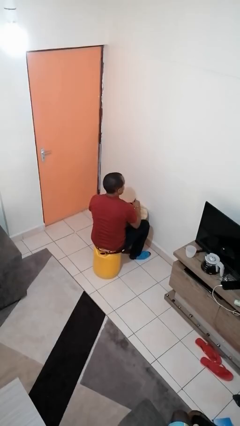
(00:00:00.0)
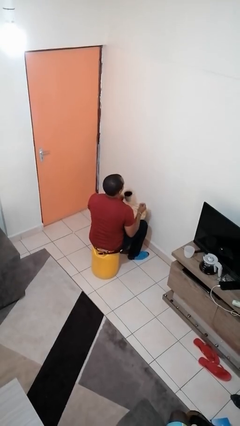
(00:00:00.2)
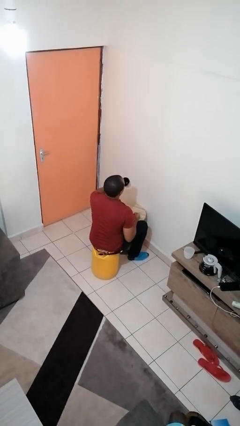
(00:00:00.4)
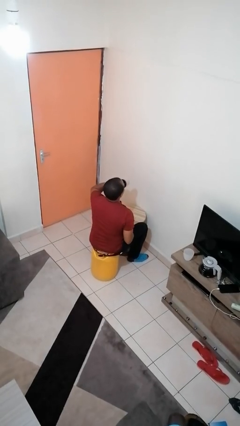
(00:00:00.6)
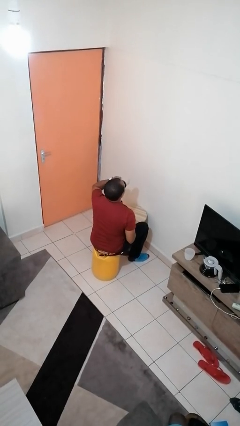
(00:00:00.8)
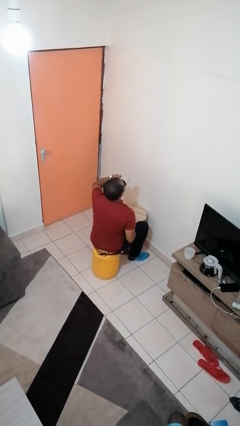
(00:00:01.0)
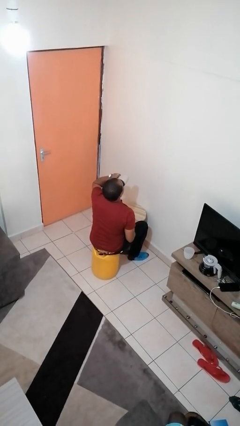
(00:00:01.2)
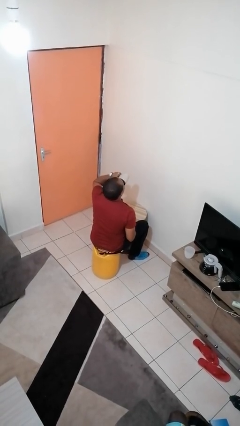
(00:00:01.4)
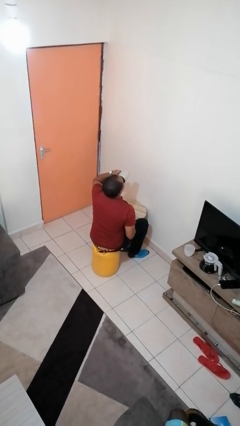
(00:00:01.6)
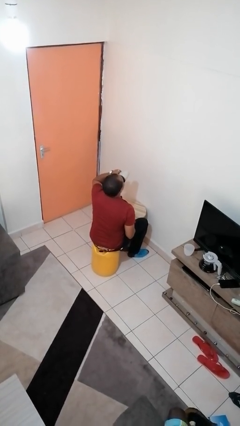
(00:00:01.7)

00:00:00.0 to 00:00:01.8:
person drinks from mug

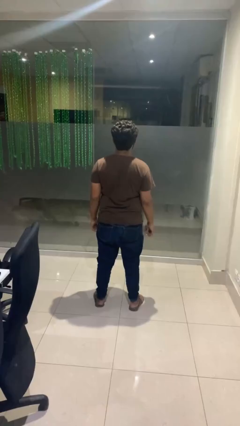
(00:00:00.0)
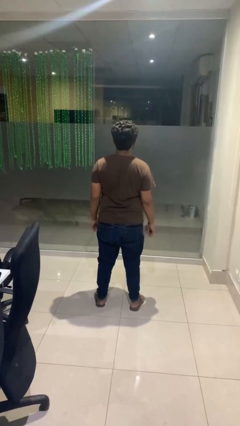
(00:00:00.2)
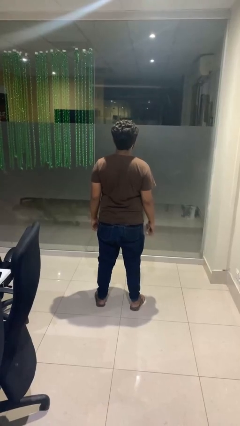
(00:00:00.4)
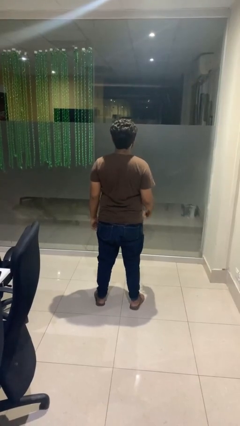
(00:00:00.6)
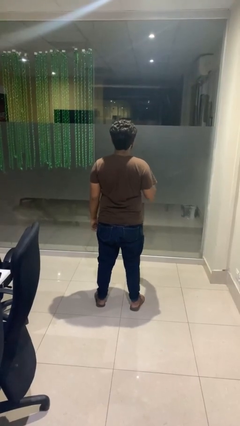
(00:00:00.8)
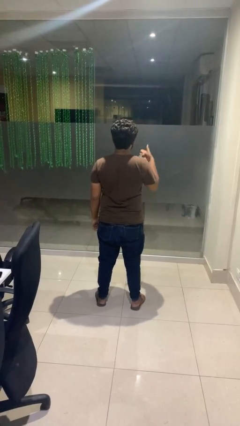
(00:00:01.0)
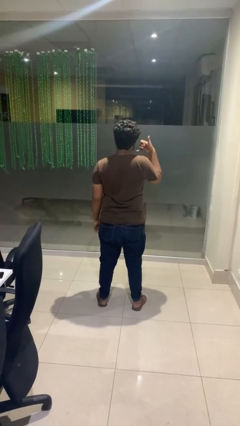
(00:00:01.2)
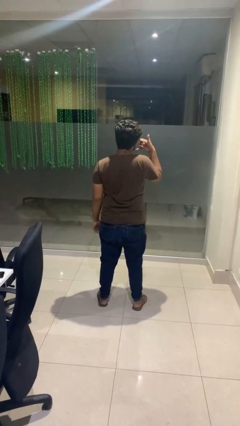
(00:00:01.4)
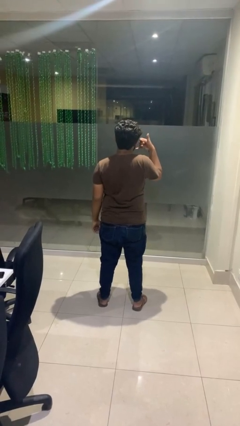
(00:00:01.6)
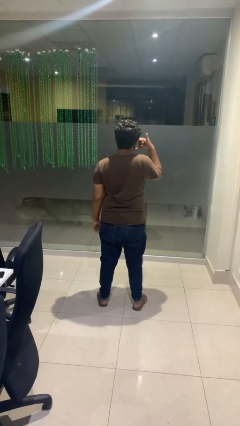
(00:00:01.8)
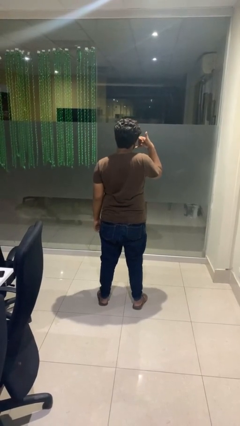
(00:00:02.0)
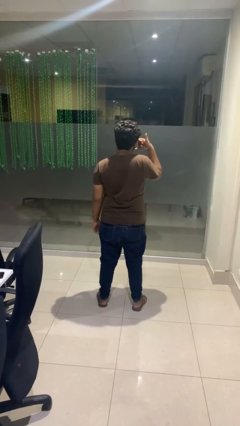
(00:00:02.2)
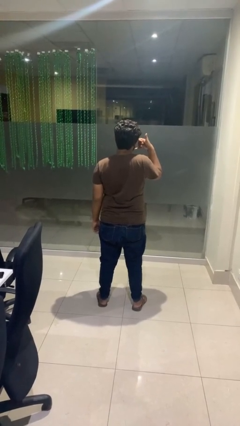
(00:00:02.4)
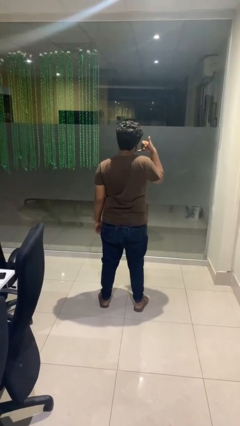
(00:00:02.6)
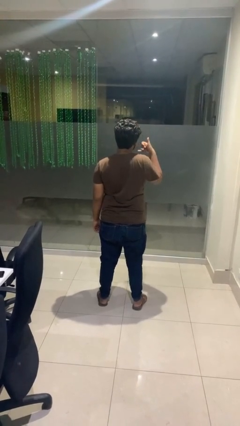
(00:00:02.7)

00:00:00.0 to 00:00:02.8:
person gestures call me

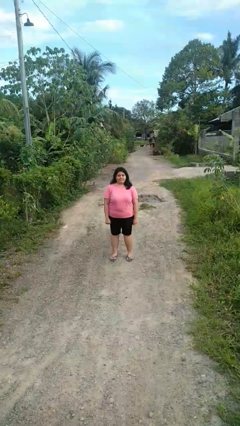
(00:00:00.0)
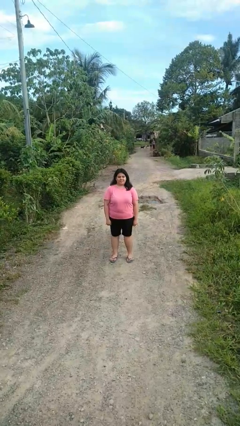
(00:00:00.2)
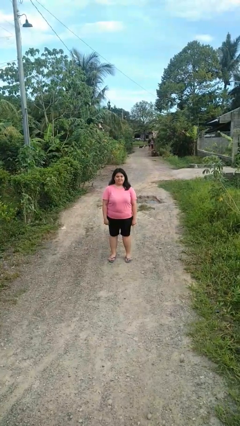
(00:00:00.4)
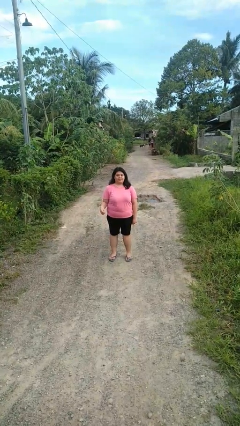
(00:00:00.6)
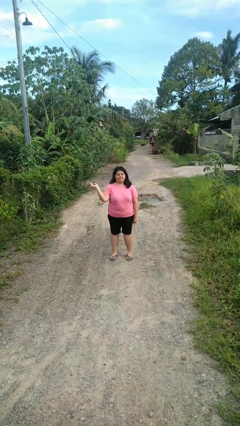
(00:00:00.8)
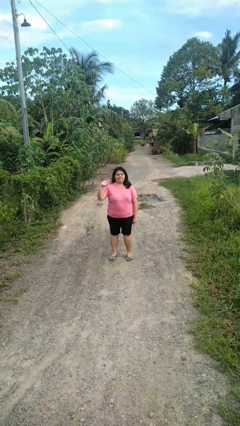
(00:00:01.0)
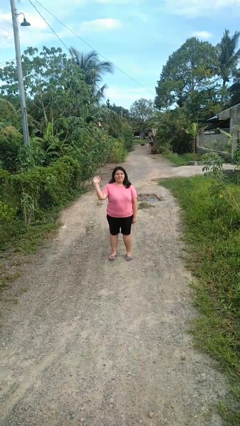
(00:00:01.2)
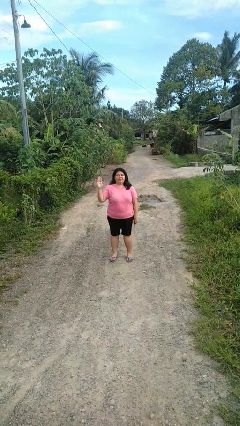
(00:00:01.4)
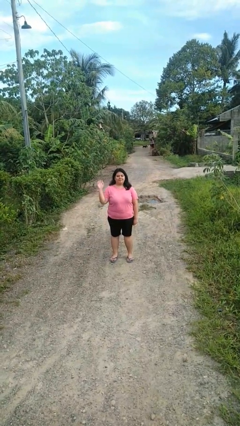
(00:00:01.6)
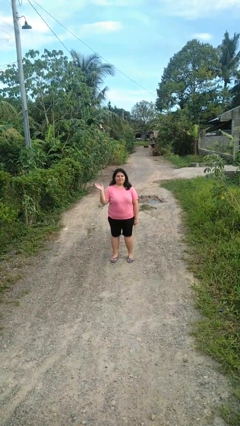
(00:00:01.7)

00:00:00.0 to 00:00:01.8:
person waves at person

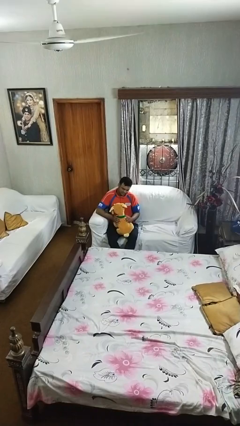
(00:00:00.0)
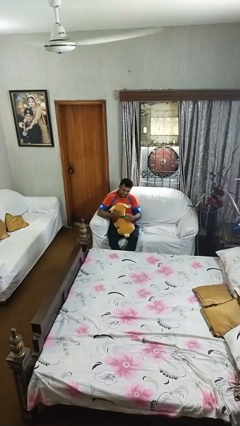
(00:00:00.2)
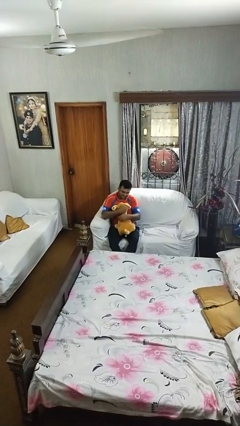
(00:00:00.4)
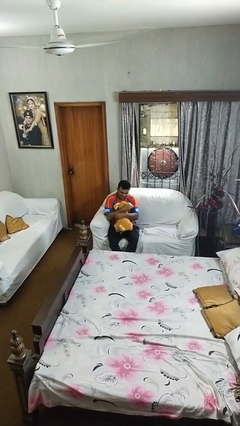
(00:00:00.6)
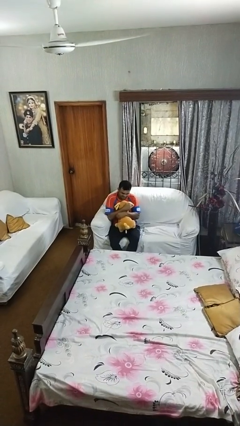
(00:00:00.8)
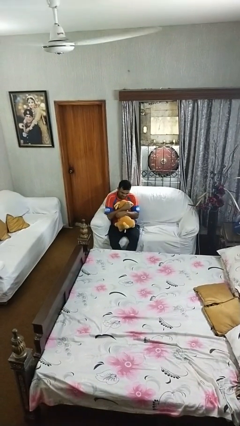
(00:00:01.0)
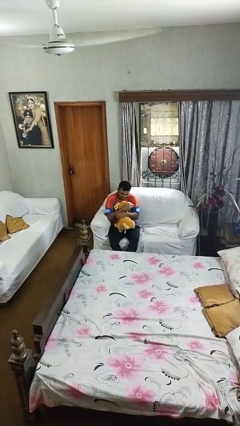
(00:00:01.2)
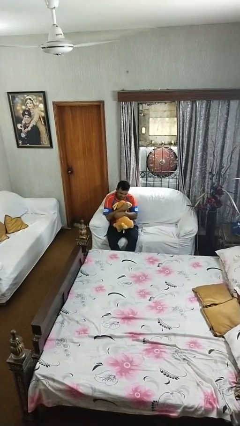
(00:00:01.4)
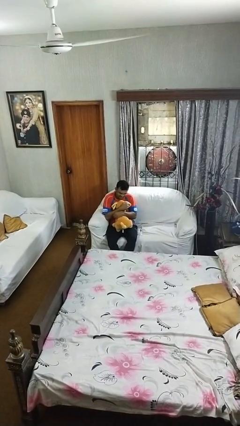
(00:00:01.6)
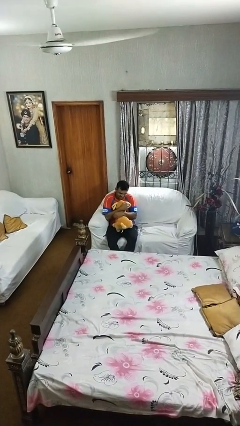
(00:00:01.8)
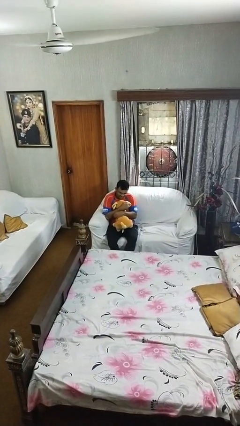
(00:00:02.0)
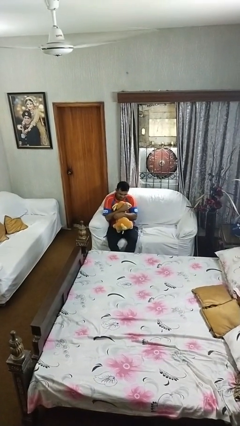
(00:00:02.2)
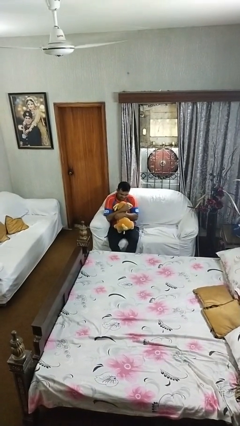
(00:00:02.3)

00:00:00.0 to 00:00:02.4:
person hugs stuffed animal

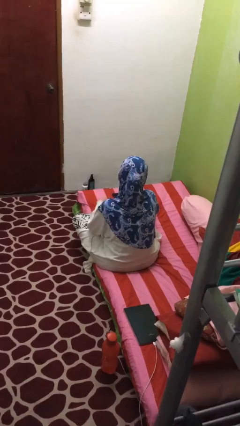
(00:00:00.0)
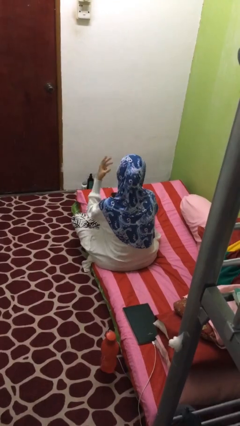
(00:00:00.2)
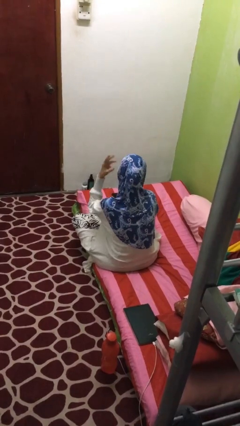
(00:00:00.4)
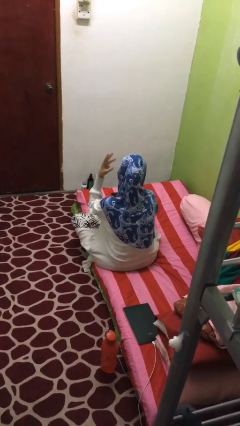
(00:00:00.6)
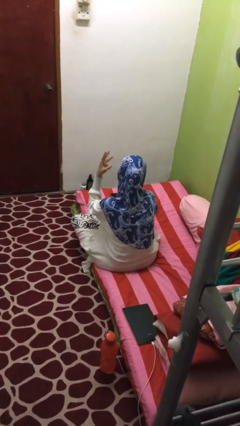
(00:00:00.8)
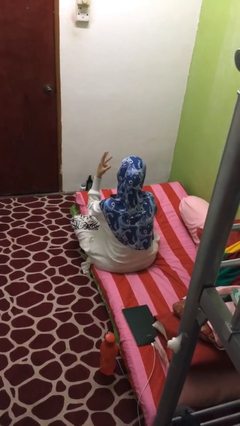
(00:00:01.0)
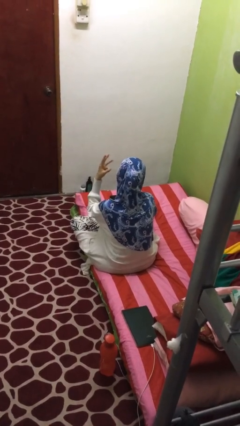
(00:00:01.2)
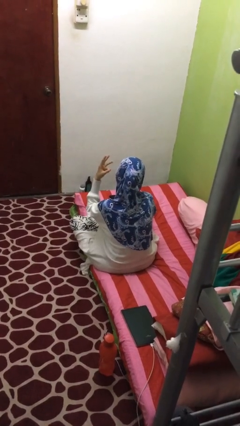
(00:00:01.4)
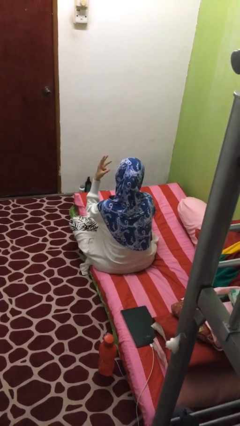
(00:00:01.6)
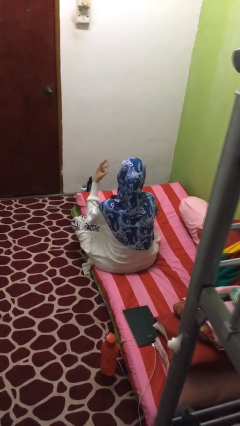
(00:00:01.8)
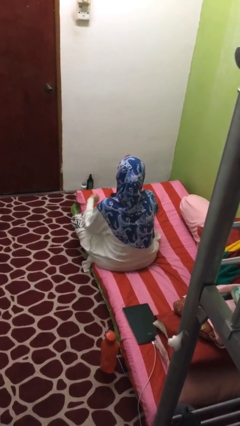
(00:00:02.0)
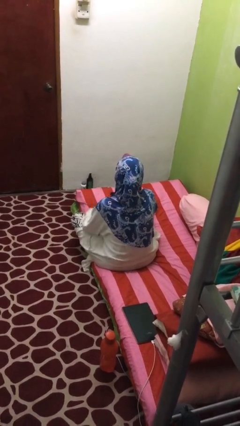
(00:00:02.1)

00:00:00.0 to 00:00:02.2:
person gestures number three

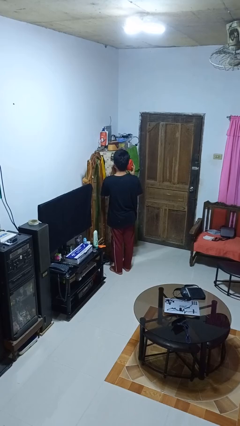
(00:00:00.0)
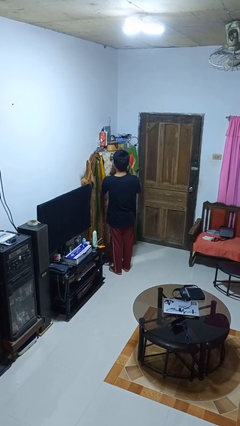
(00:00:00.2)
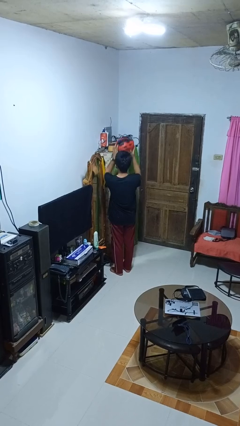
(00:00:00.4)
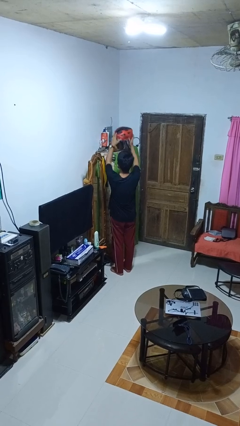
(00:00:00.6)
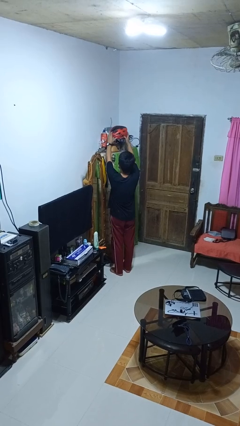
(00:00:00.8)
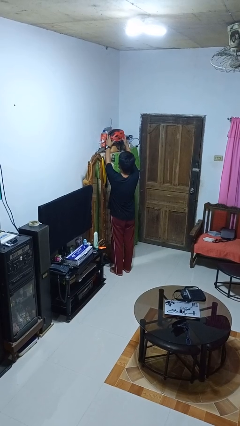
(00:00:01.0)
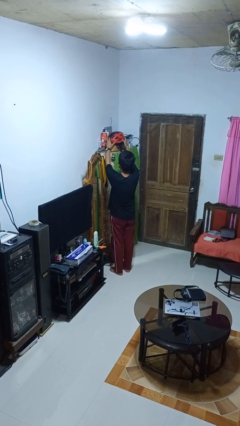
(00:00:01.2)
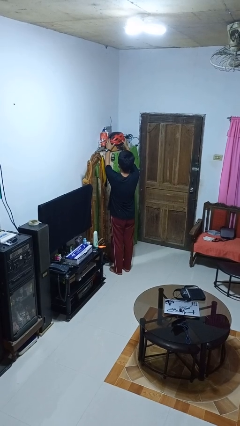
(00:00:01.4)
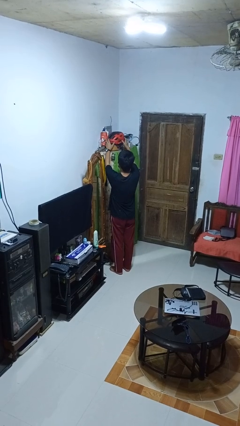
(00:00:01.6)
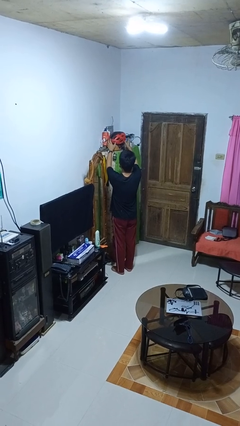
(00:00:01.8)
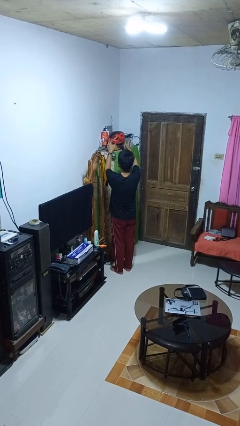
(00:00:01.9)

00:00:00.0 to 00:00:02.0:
person puts down object on shelf

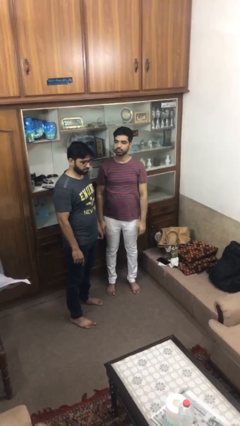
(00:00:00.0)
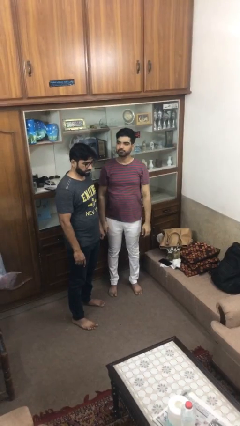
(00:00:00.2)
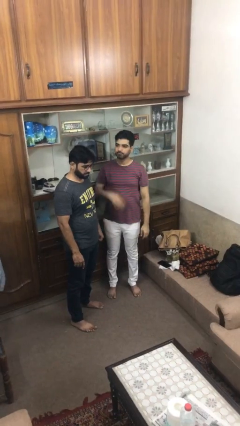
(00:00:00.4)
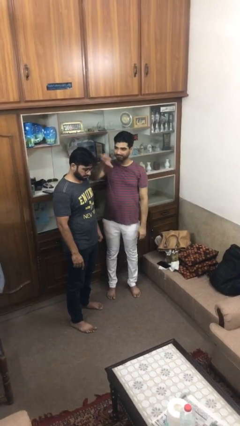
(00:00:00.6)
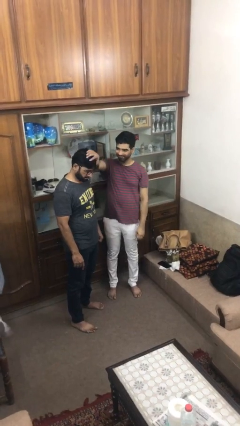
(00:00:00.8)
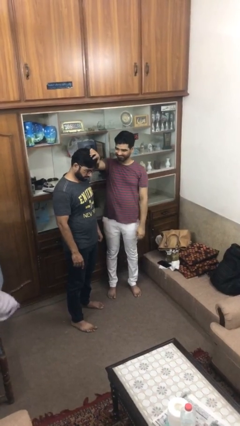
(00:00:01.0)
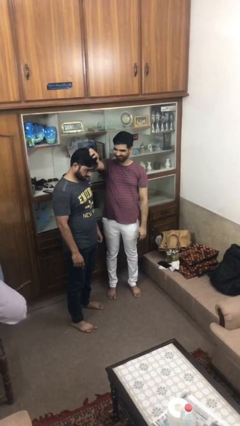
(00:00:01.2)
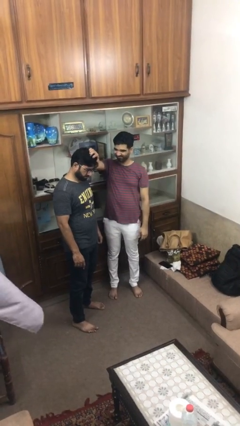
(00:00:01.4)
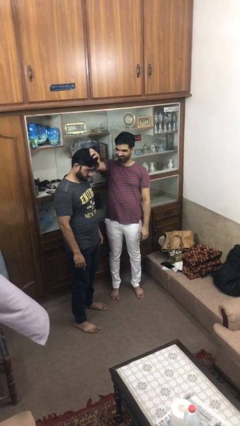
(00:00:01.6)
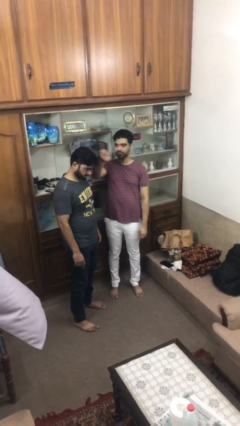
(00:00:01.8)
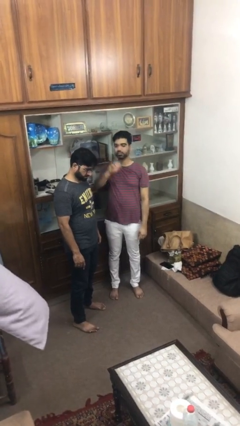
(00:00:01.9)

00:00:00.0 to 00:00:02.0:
person grabs person by hair

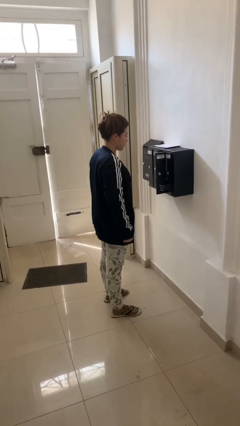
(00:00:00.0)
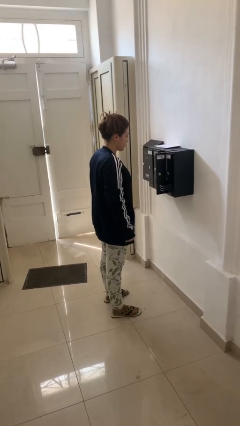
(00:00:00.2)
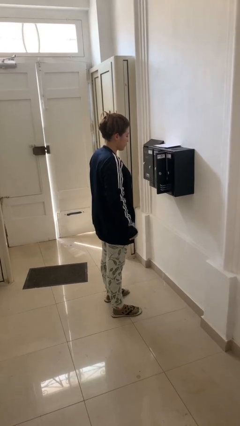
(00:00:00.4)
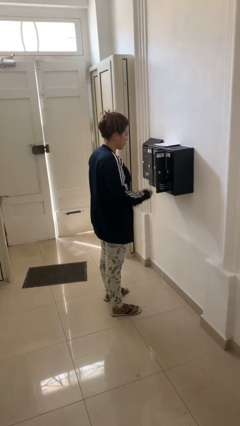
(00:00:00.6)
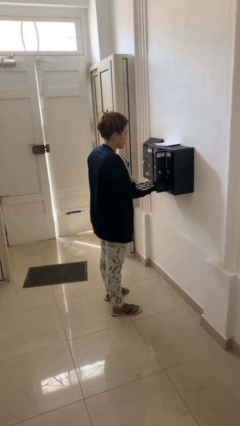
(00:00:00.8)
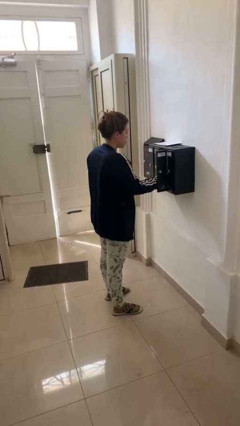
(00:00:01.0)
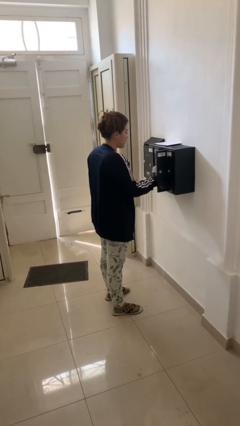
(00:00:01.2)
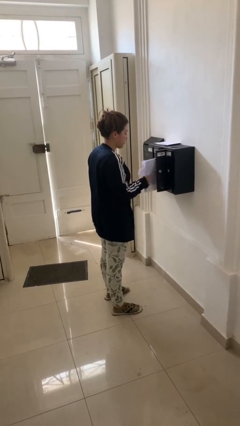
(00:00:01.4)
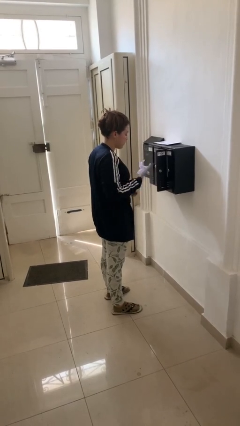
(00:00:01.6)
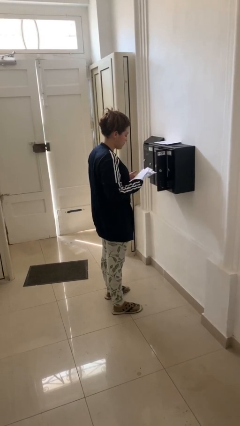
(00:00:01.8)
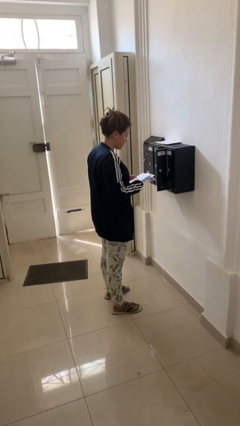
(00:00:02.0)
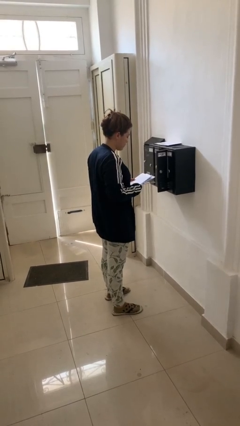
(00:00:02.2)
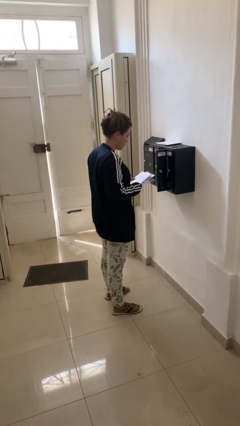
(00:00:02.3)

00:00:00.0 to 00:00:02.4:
person takes letters from mailbox
